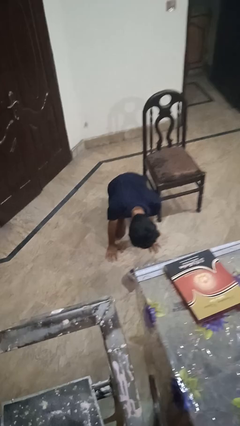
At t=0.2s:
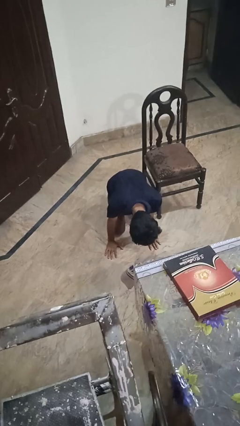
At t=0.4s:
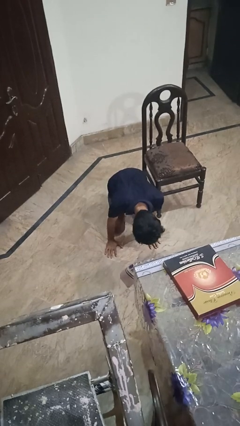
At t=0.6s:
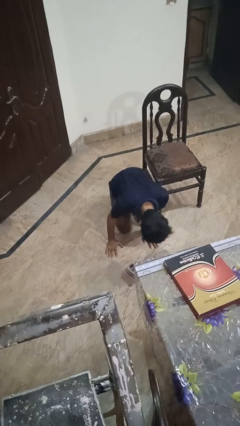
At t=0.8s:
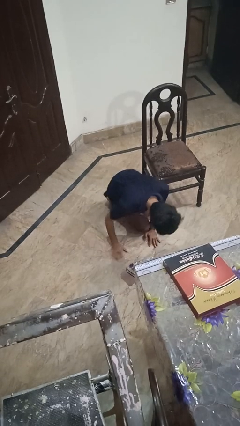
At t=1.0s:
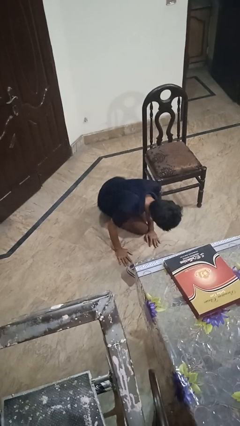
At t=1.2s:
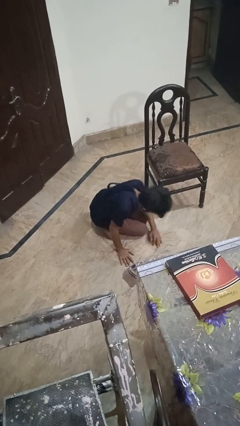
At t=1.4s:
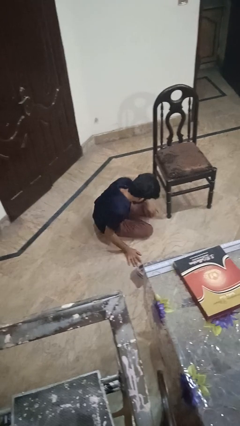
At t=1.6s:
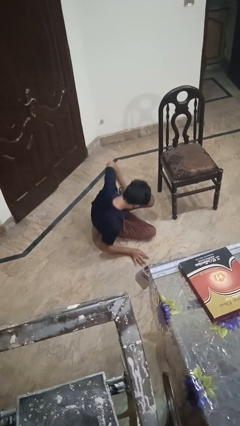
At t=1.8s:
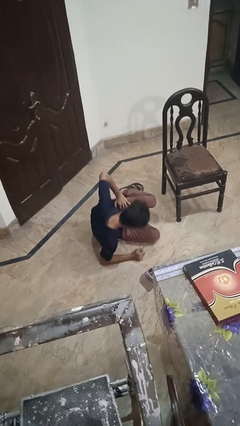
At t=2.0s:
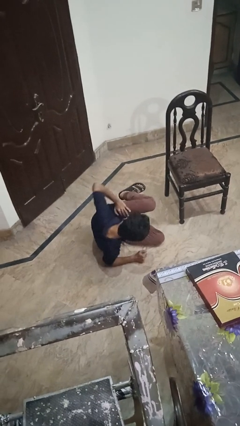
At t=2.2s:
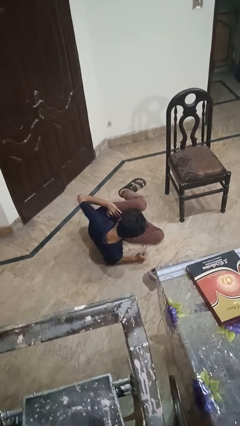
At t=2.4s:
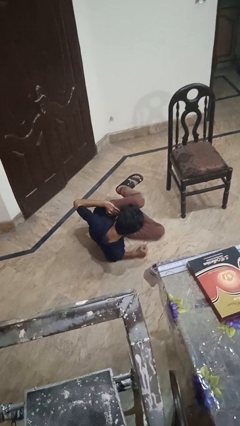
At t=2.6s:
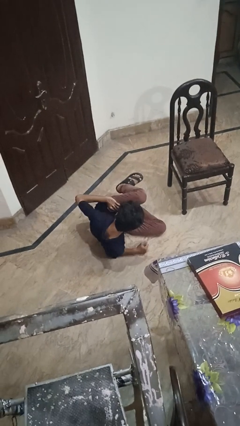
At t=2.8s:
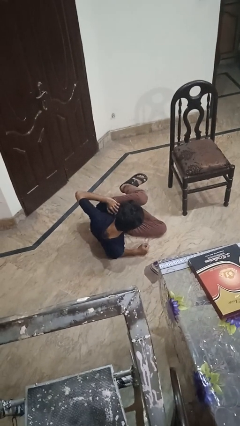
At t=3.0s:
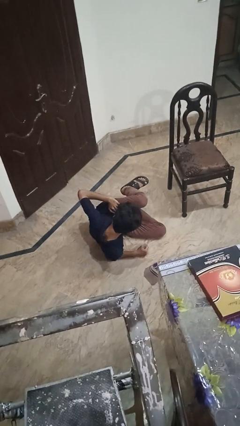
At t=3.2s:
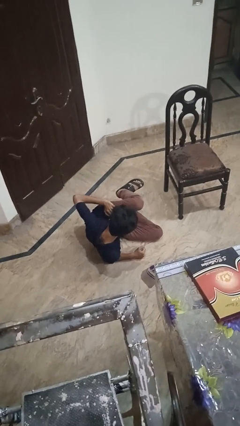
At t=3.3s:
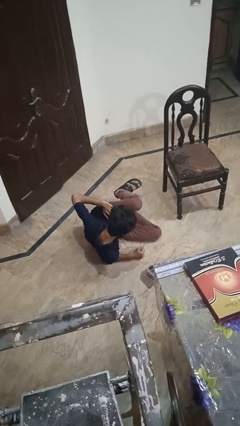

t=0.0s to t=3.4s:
person lies down on floor

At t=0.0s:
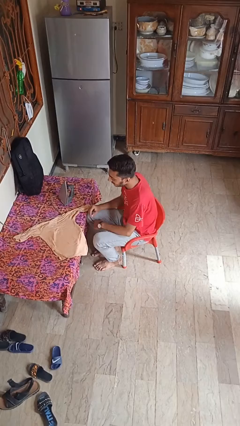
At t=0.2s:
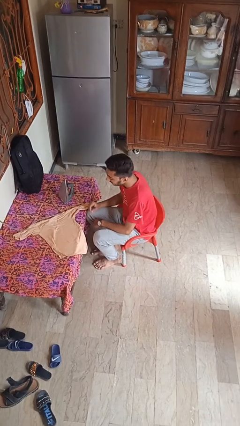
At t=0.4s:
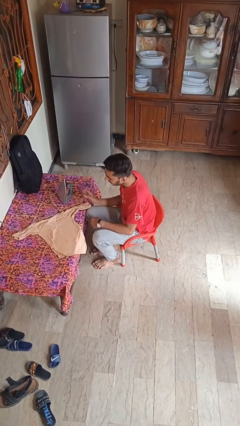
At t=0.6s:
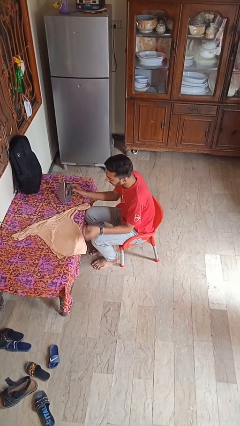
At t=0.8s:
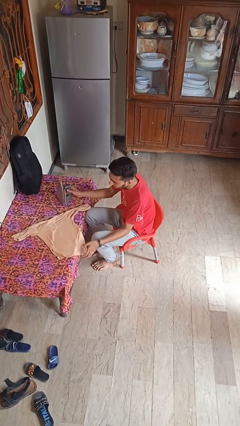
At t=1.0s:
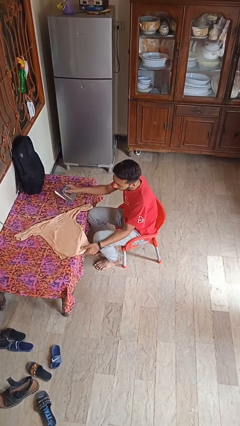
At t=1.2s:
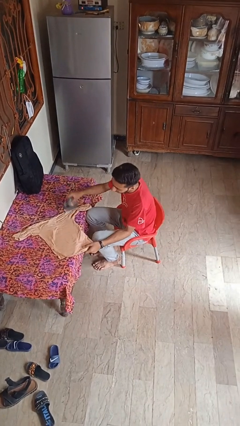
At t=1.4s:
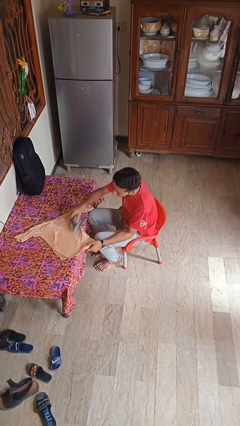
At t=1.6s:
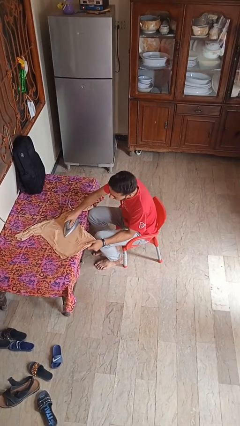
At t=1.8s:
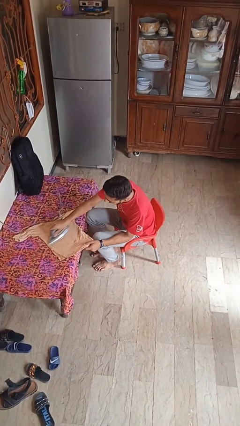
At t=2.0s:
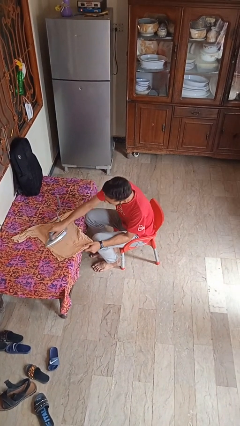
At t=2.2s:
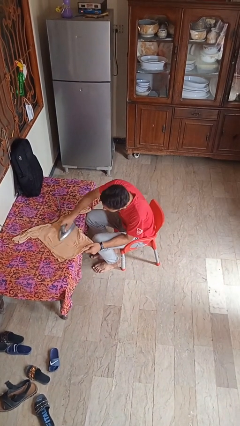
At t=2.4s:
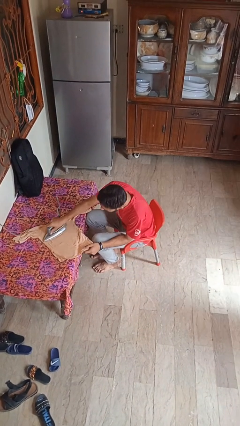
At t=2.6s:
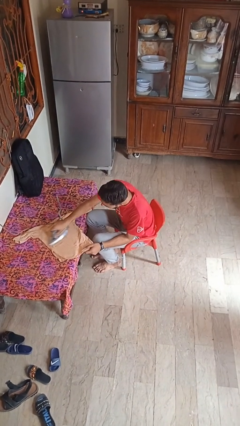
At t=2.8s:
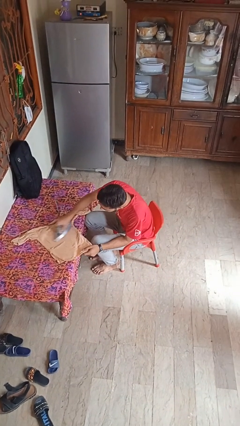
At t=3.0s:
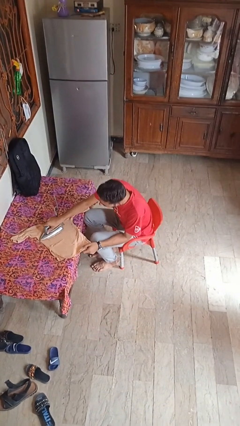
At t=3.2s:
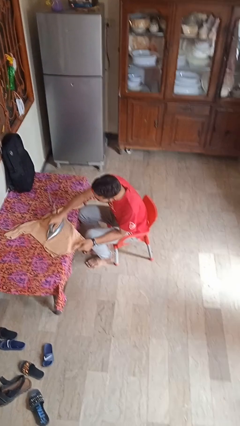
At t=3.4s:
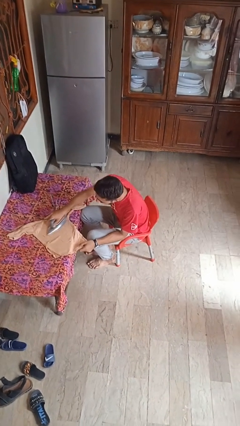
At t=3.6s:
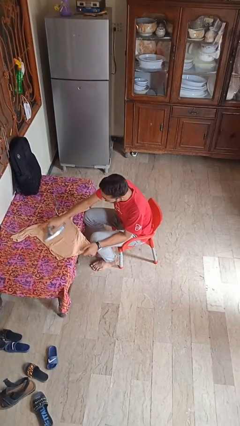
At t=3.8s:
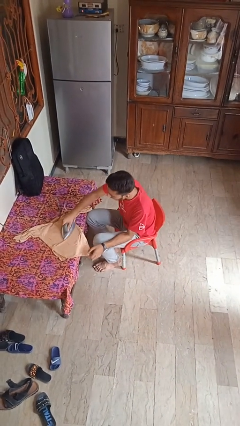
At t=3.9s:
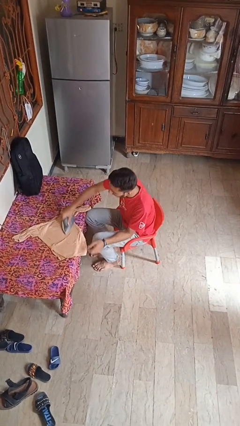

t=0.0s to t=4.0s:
person irons clothes

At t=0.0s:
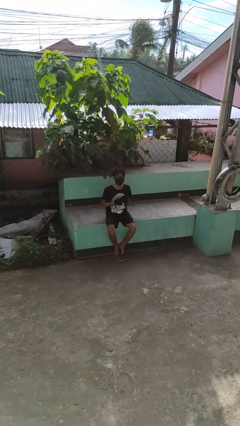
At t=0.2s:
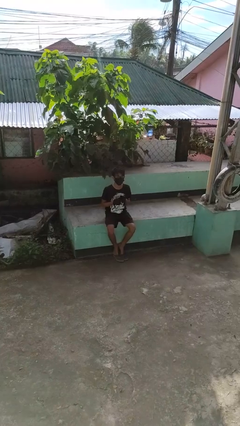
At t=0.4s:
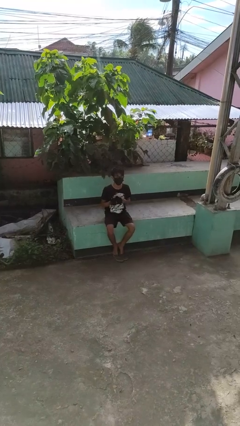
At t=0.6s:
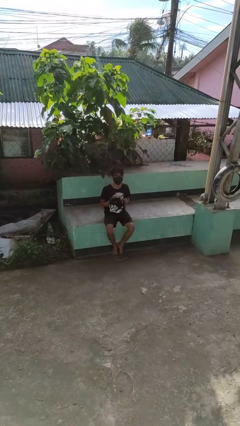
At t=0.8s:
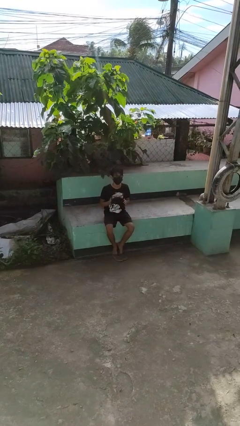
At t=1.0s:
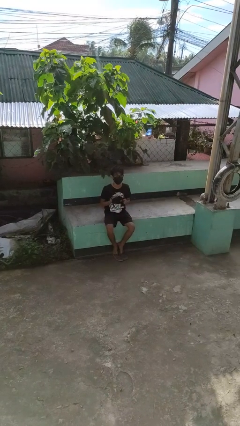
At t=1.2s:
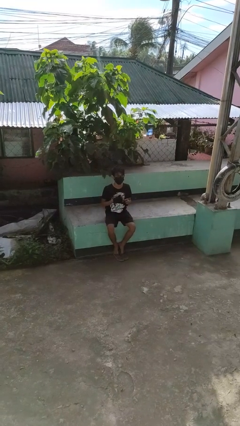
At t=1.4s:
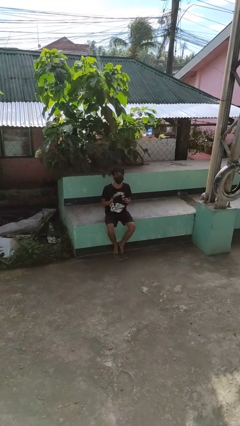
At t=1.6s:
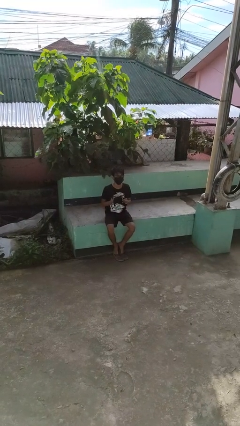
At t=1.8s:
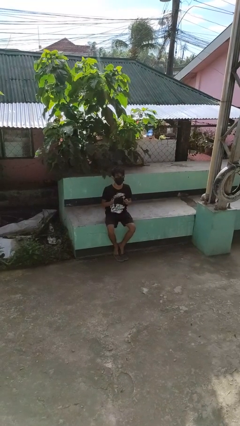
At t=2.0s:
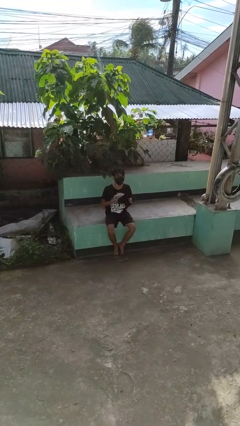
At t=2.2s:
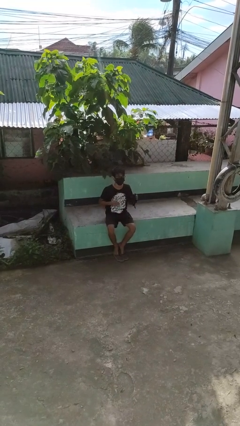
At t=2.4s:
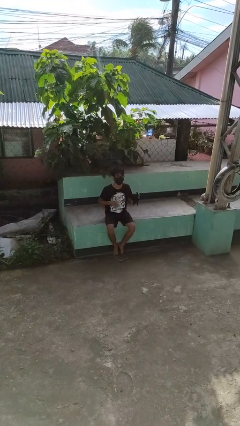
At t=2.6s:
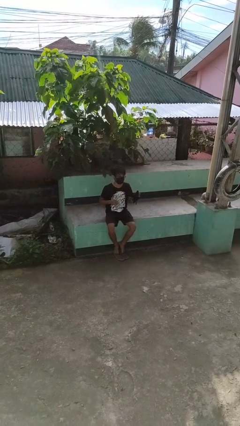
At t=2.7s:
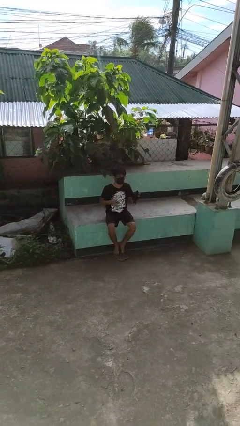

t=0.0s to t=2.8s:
person takes off gloves

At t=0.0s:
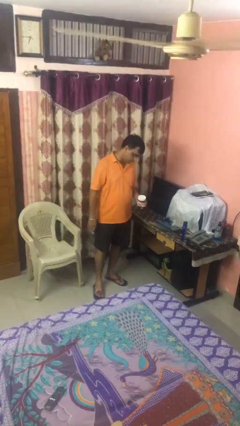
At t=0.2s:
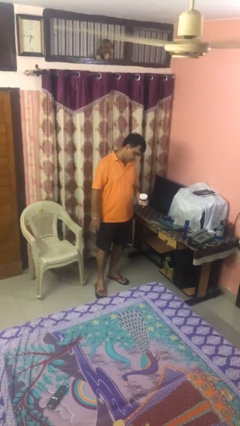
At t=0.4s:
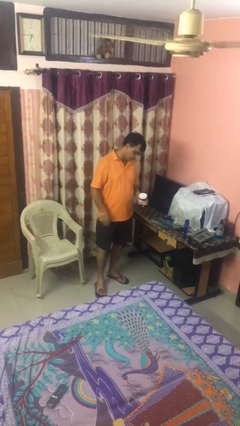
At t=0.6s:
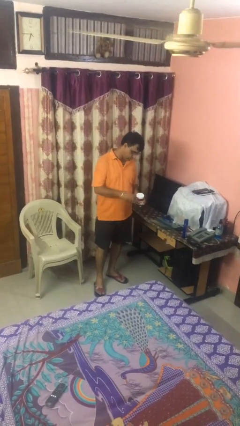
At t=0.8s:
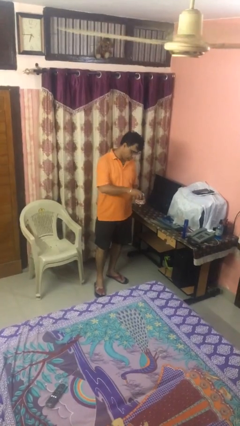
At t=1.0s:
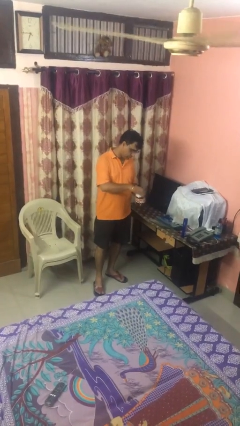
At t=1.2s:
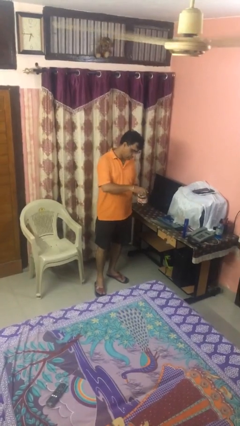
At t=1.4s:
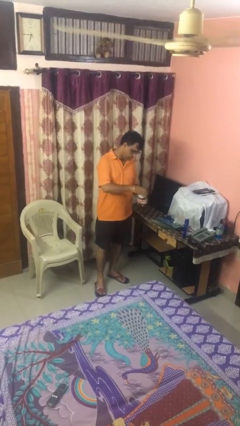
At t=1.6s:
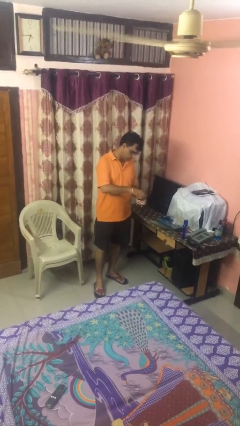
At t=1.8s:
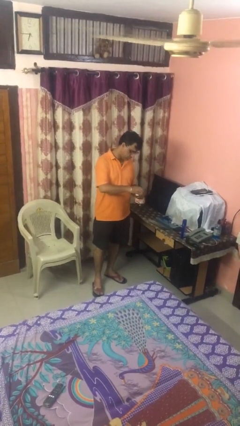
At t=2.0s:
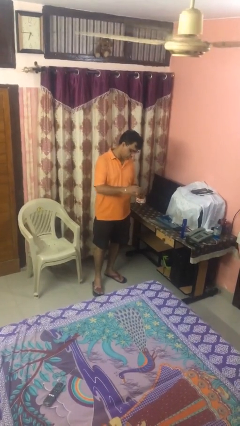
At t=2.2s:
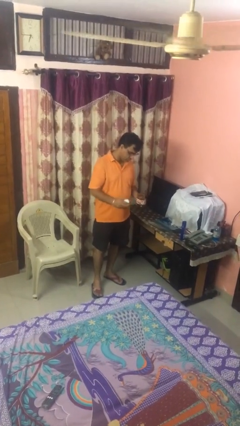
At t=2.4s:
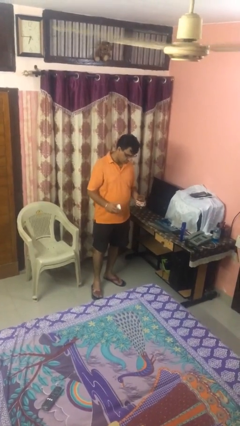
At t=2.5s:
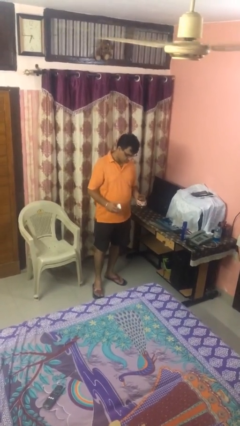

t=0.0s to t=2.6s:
person opens jar

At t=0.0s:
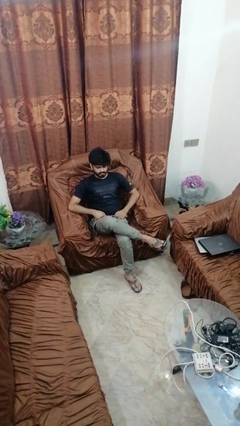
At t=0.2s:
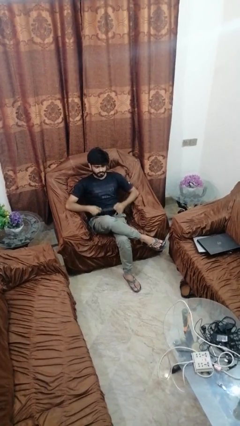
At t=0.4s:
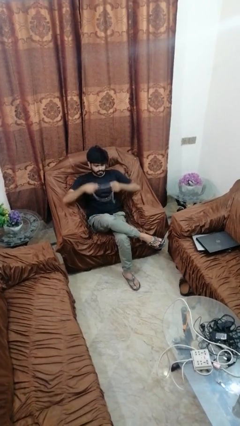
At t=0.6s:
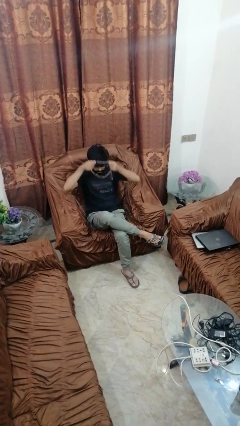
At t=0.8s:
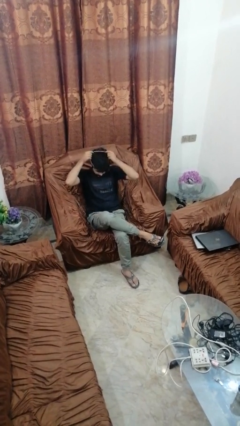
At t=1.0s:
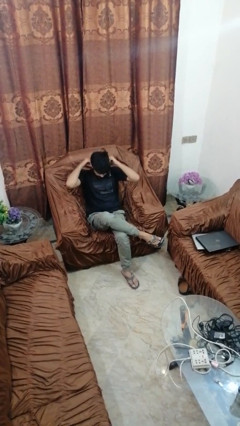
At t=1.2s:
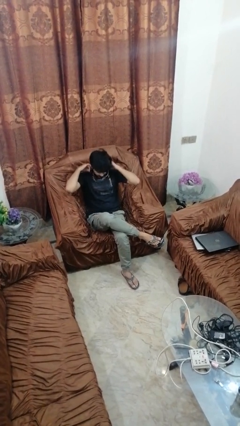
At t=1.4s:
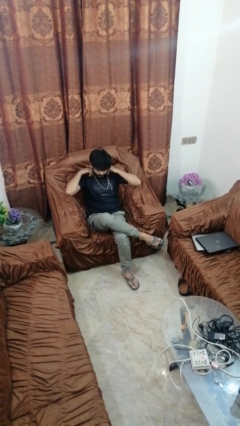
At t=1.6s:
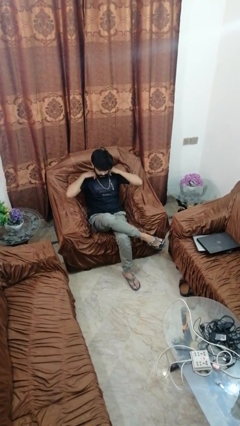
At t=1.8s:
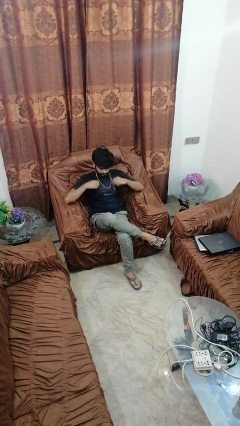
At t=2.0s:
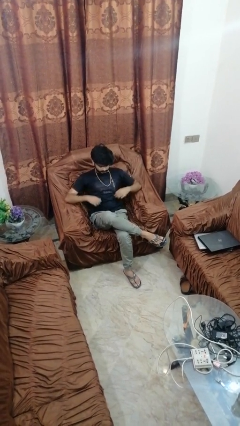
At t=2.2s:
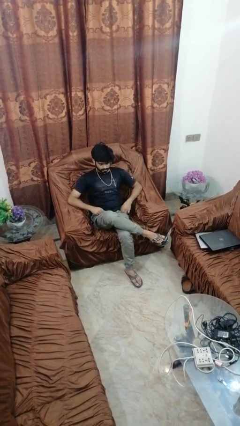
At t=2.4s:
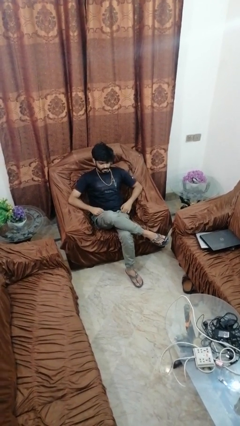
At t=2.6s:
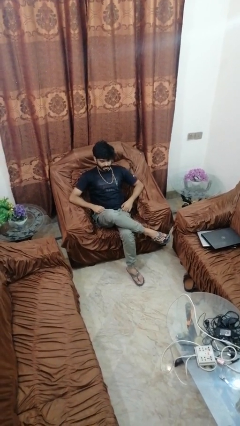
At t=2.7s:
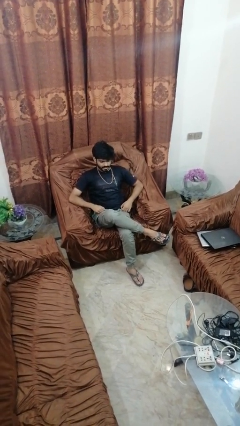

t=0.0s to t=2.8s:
person puts on necklace

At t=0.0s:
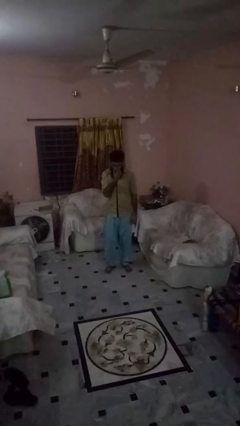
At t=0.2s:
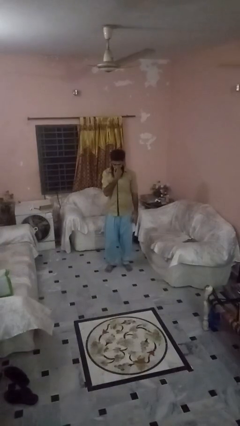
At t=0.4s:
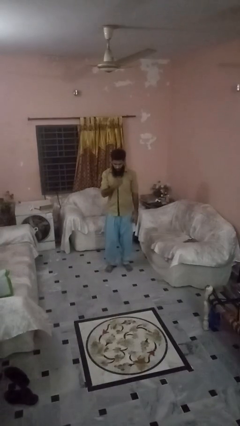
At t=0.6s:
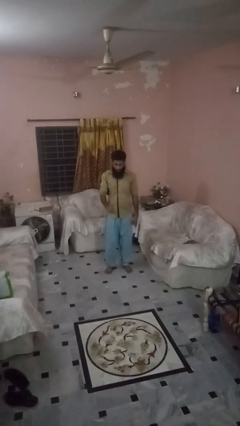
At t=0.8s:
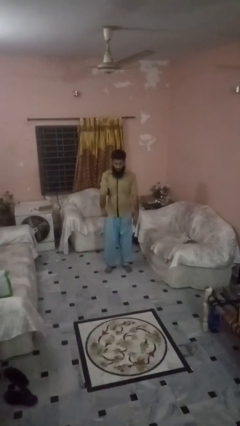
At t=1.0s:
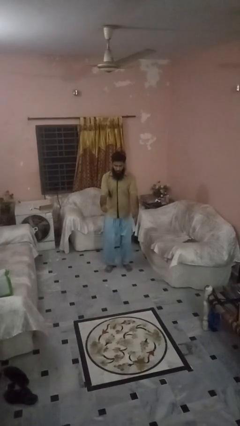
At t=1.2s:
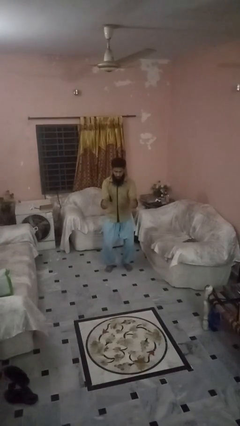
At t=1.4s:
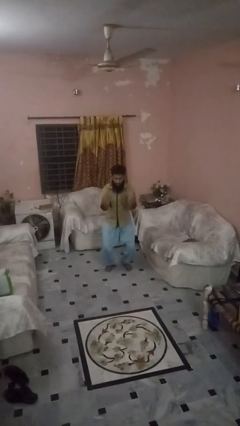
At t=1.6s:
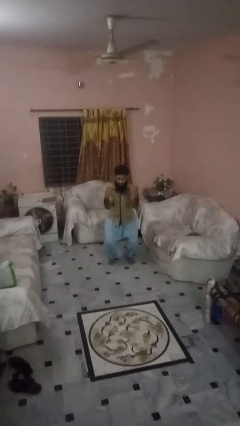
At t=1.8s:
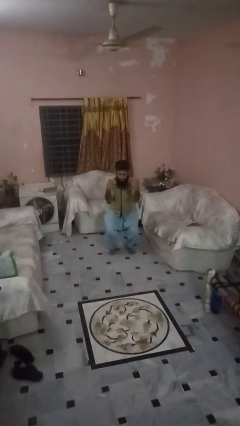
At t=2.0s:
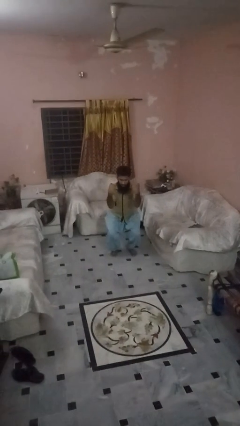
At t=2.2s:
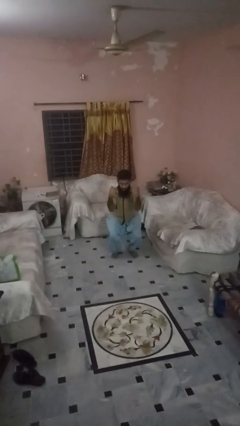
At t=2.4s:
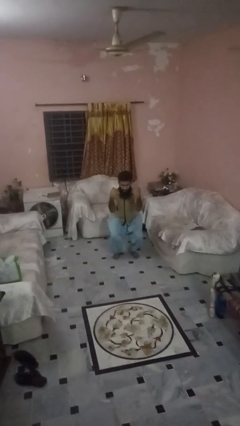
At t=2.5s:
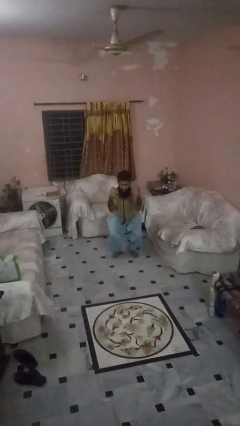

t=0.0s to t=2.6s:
person squats
